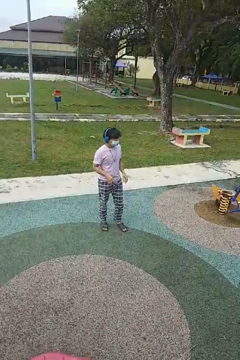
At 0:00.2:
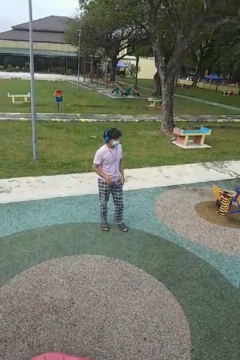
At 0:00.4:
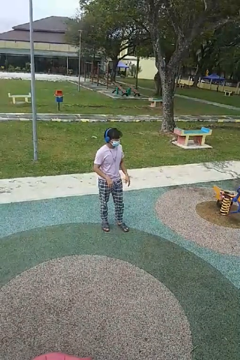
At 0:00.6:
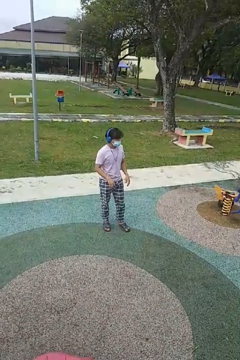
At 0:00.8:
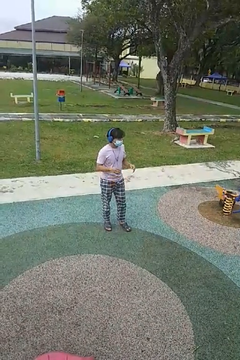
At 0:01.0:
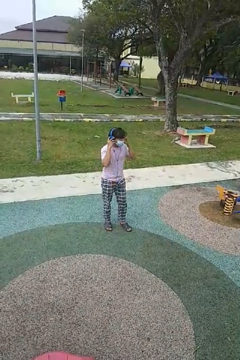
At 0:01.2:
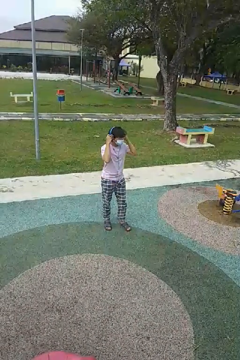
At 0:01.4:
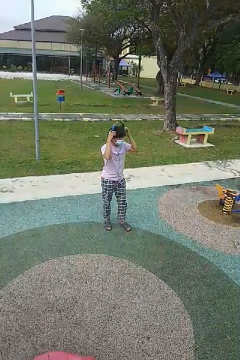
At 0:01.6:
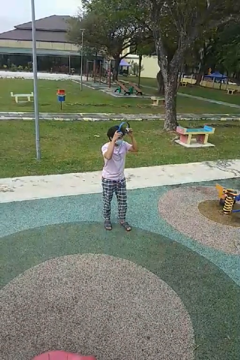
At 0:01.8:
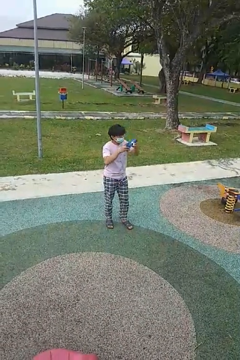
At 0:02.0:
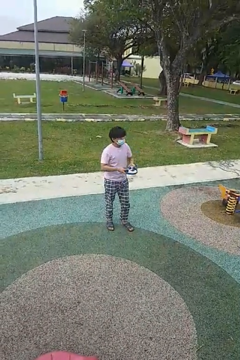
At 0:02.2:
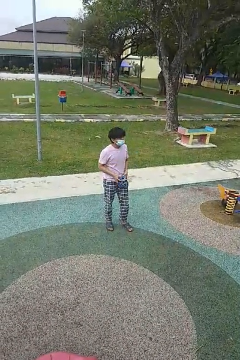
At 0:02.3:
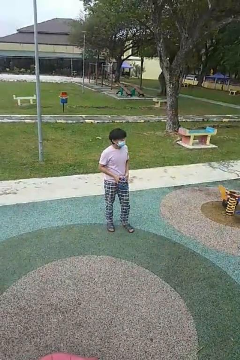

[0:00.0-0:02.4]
person takes off headphones

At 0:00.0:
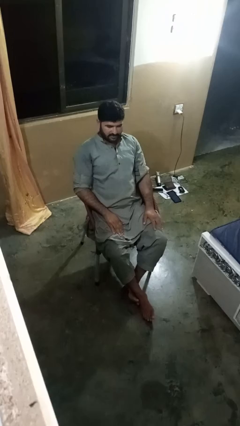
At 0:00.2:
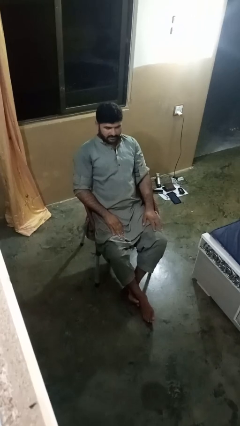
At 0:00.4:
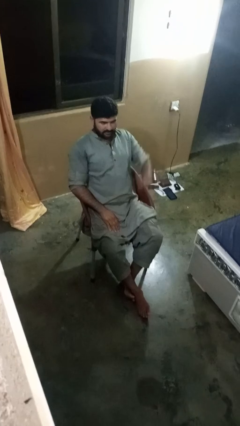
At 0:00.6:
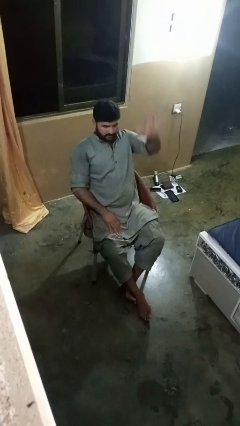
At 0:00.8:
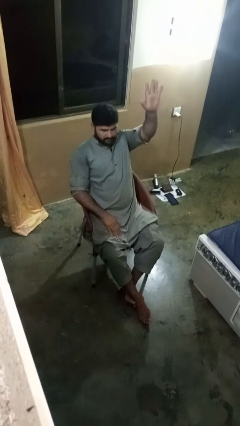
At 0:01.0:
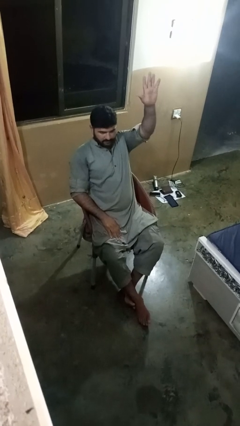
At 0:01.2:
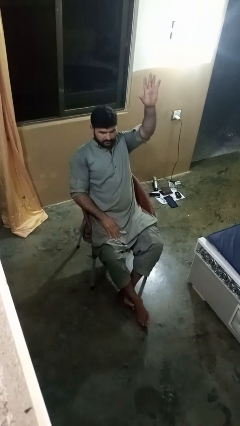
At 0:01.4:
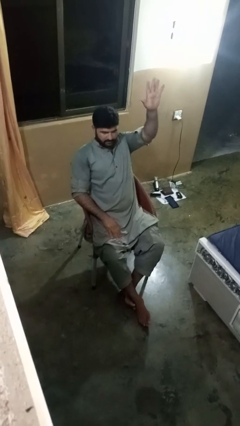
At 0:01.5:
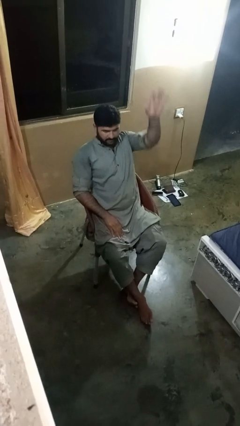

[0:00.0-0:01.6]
person gestures number five

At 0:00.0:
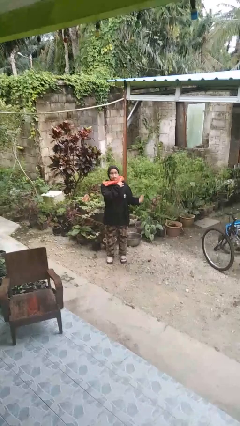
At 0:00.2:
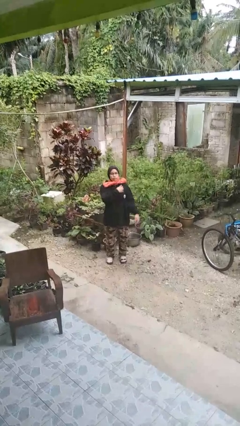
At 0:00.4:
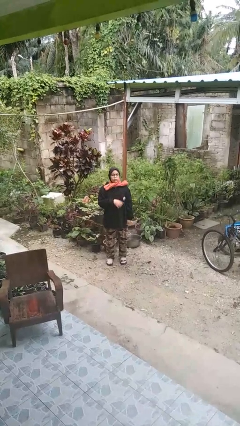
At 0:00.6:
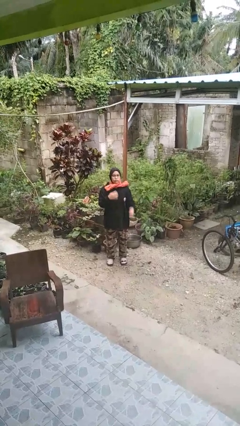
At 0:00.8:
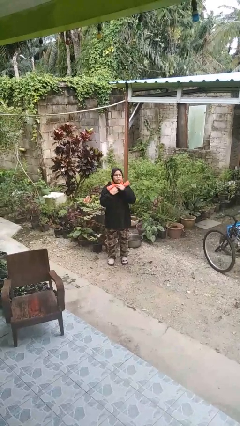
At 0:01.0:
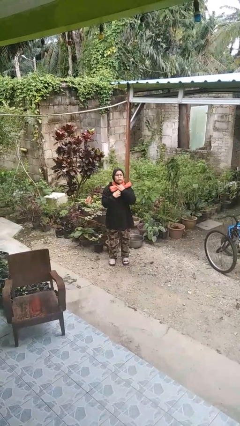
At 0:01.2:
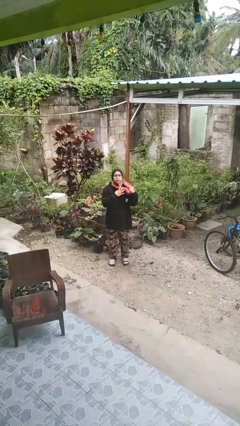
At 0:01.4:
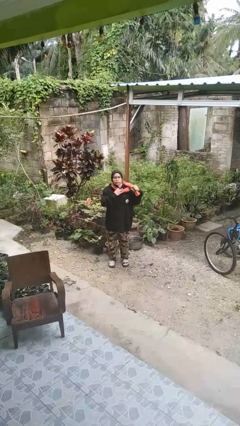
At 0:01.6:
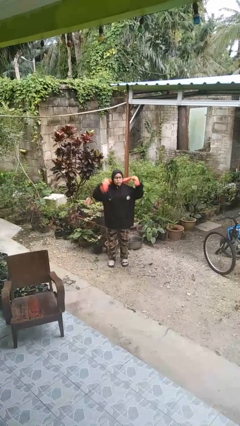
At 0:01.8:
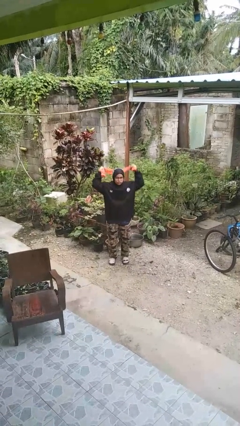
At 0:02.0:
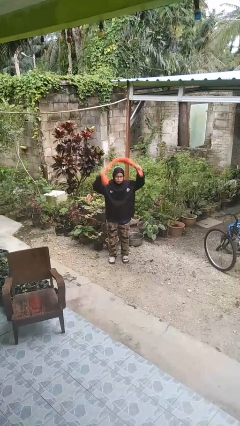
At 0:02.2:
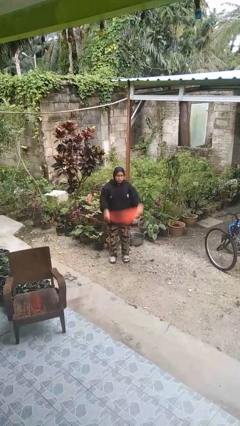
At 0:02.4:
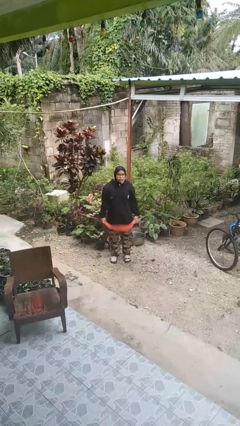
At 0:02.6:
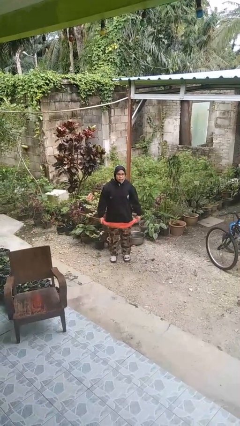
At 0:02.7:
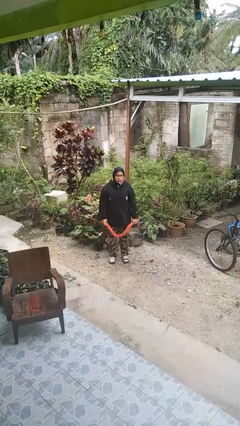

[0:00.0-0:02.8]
person takes off scarf

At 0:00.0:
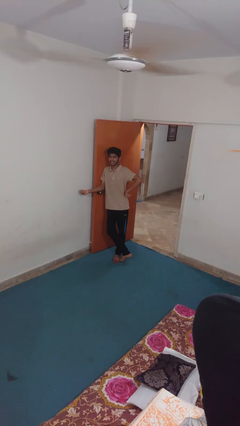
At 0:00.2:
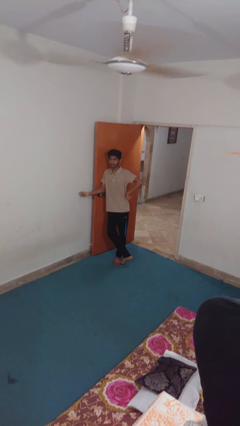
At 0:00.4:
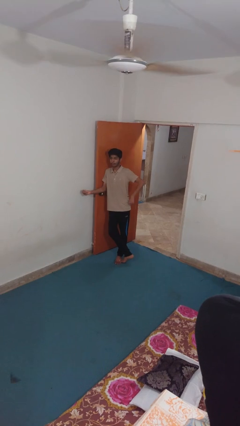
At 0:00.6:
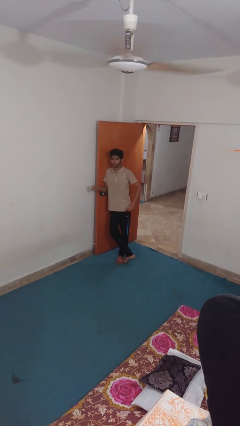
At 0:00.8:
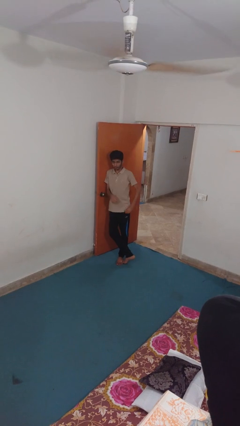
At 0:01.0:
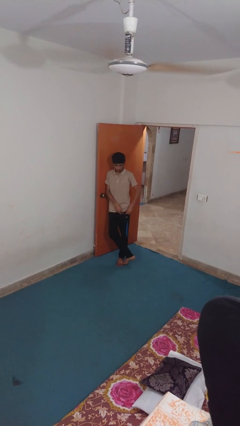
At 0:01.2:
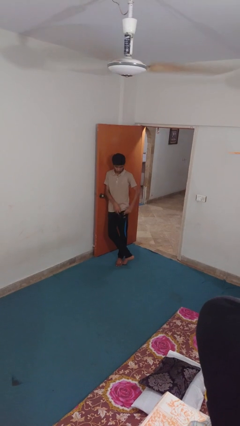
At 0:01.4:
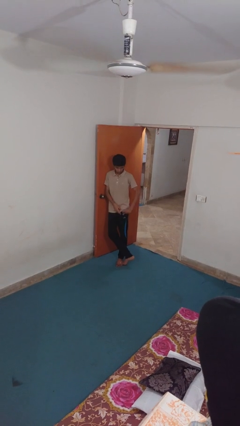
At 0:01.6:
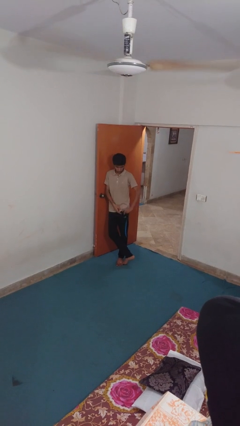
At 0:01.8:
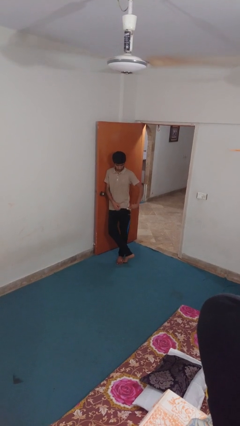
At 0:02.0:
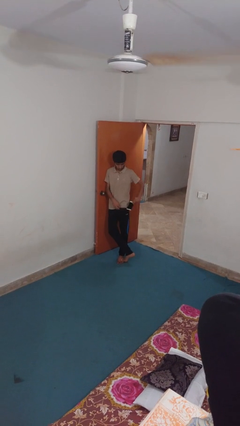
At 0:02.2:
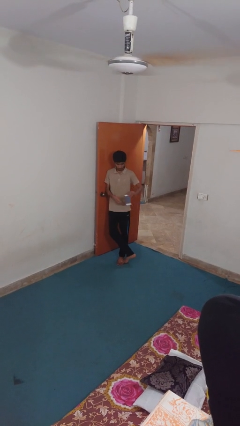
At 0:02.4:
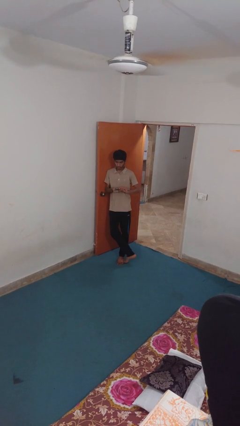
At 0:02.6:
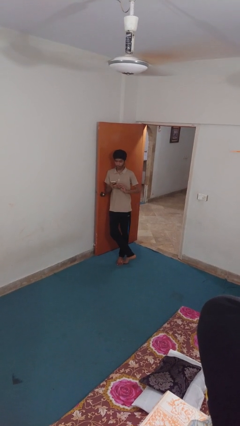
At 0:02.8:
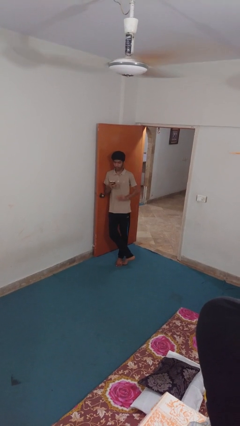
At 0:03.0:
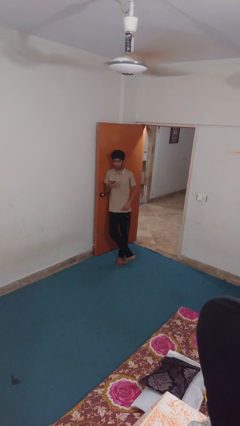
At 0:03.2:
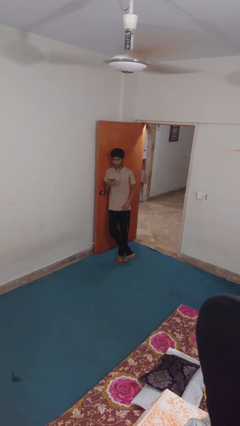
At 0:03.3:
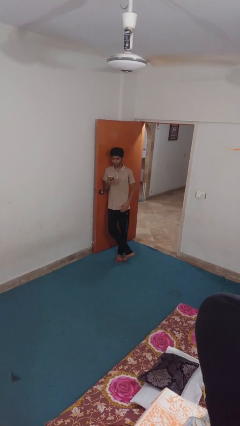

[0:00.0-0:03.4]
person takes phone from pocket

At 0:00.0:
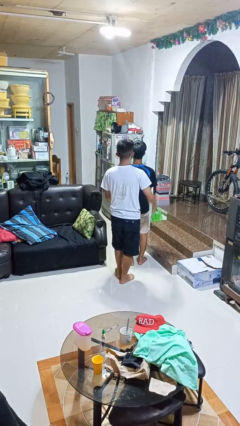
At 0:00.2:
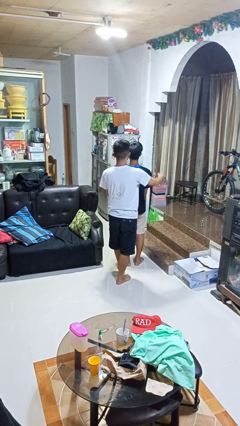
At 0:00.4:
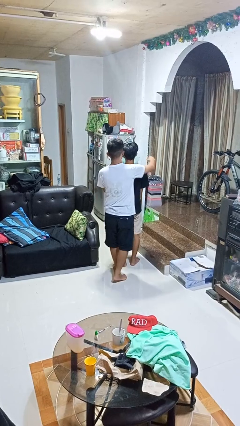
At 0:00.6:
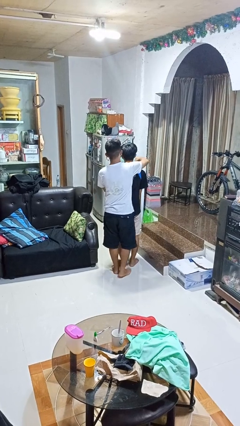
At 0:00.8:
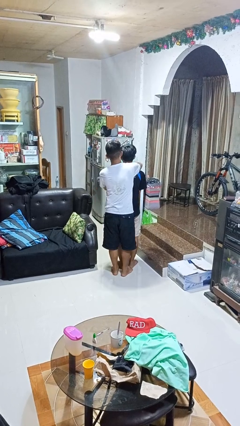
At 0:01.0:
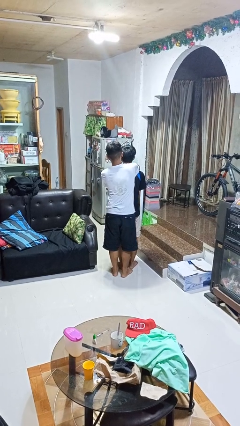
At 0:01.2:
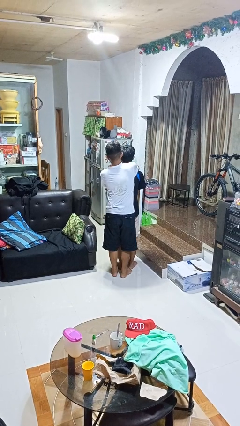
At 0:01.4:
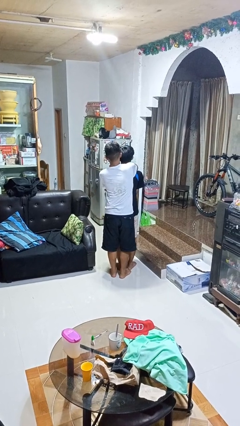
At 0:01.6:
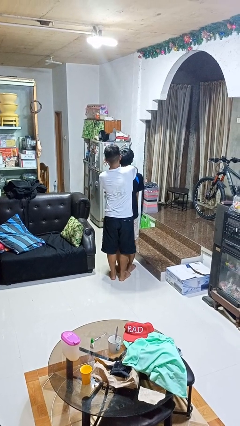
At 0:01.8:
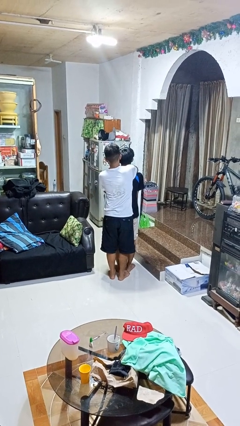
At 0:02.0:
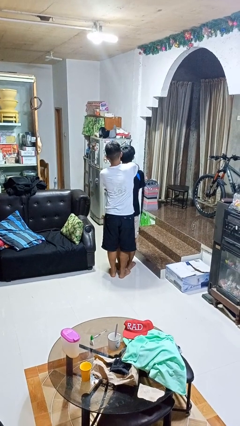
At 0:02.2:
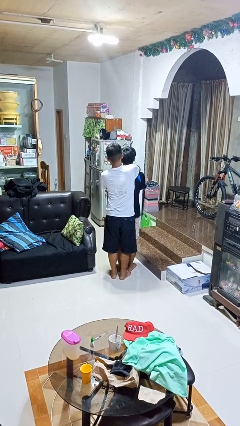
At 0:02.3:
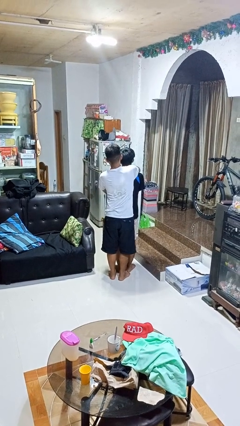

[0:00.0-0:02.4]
person hugs person from behind

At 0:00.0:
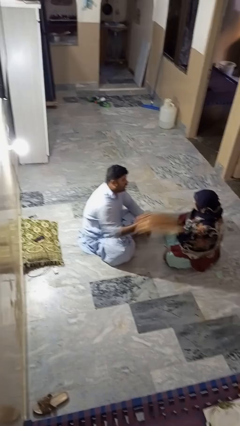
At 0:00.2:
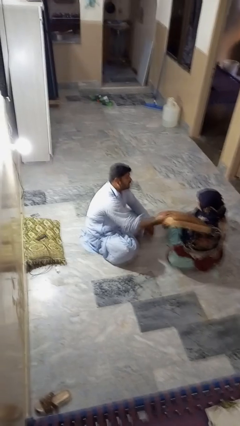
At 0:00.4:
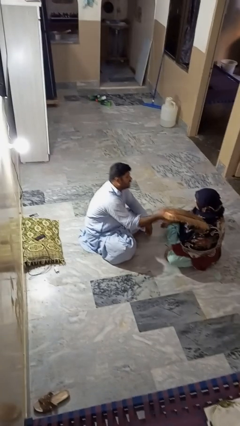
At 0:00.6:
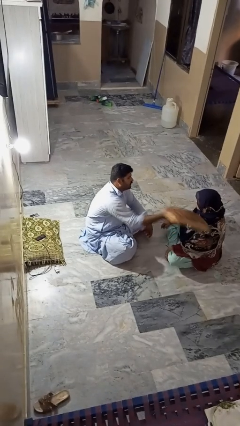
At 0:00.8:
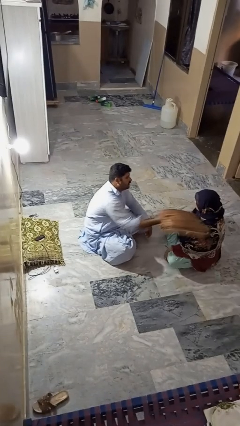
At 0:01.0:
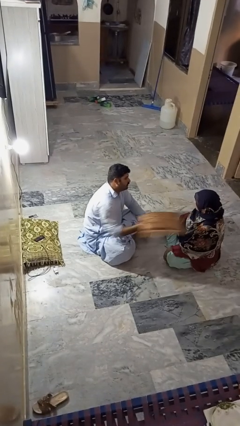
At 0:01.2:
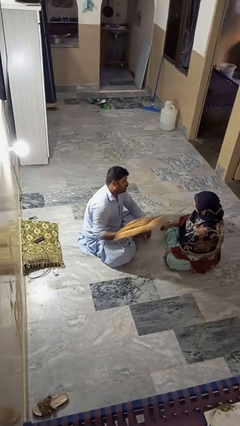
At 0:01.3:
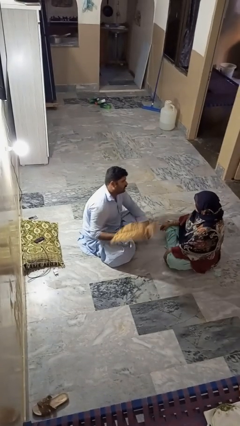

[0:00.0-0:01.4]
person hits person with pillow

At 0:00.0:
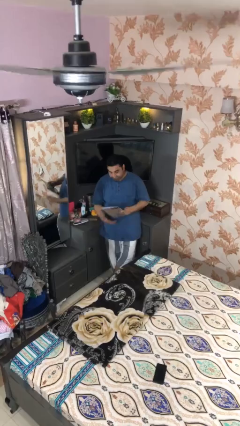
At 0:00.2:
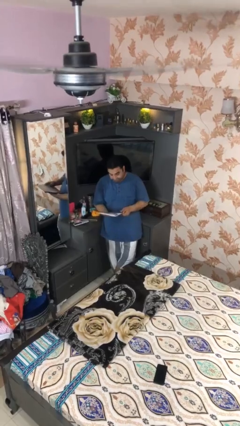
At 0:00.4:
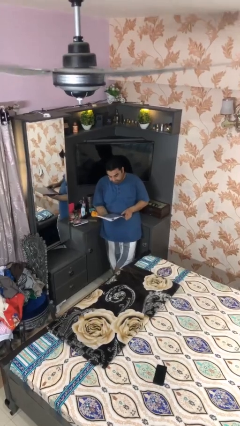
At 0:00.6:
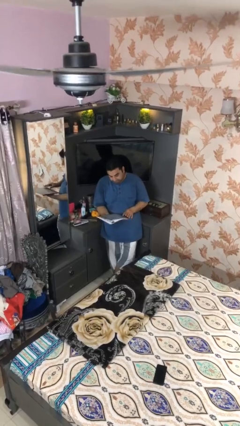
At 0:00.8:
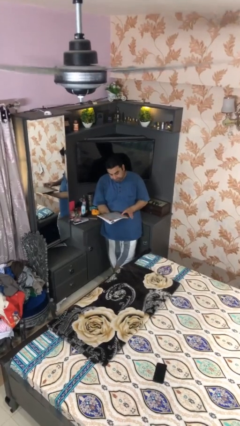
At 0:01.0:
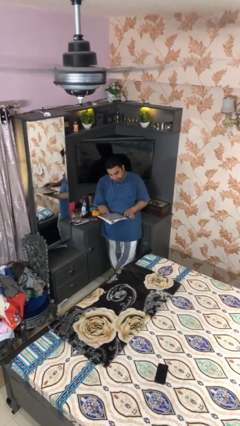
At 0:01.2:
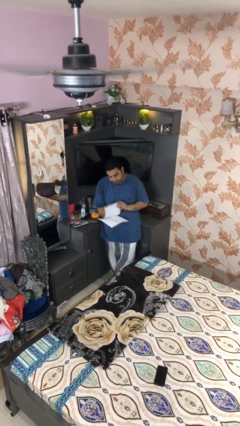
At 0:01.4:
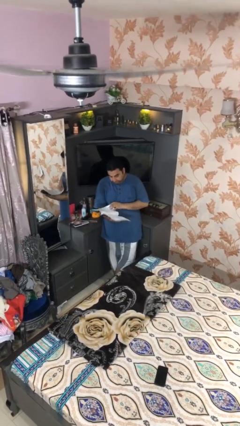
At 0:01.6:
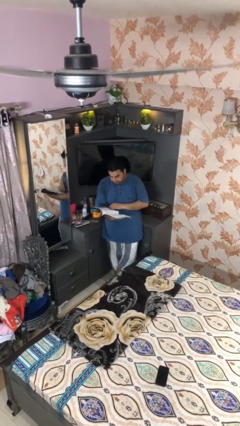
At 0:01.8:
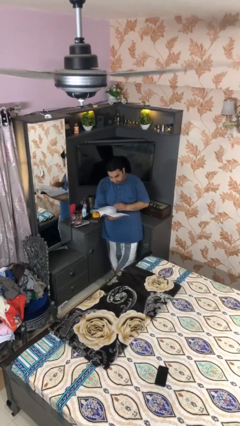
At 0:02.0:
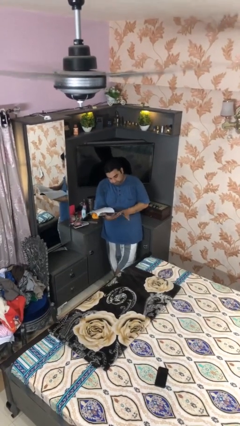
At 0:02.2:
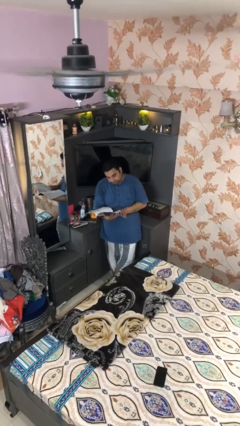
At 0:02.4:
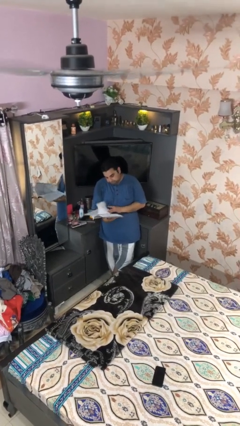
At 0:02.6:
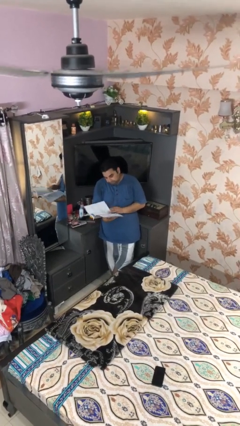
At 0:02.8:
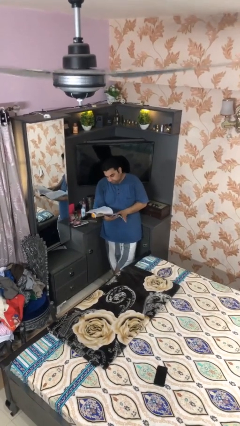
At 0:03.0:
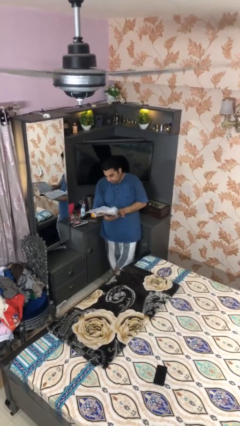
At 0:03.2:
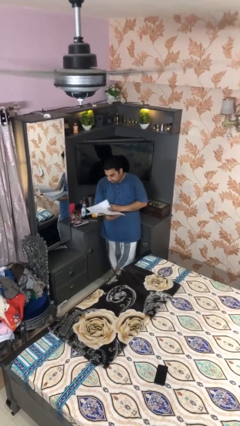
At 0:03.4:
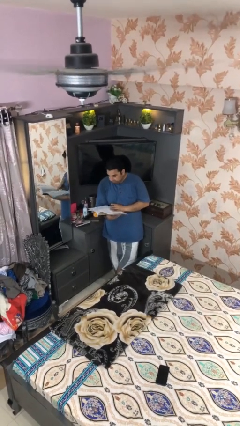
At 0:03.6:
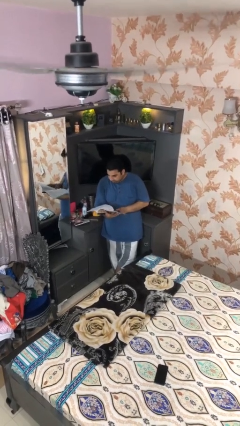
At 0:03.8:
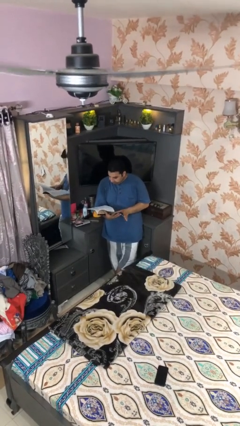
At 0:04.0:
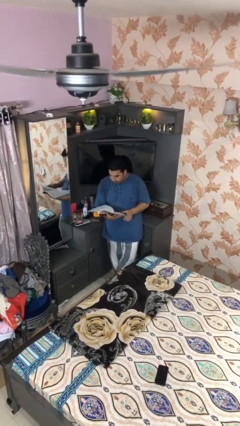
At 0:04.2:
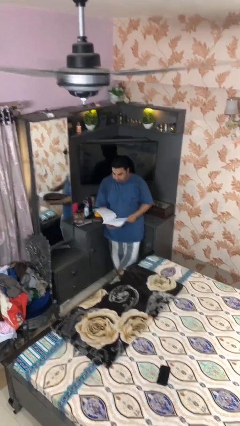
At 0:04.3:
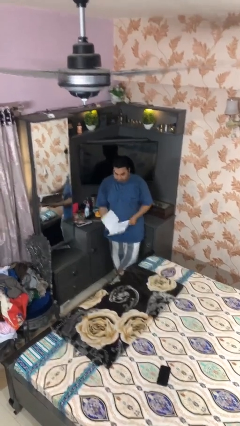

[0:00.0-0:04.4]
person reads book
